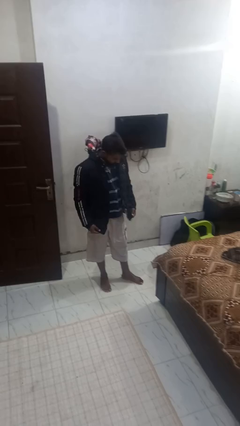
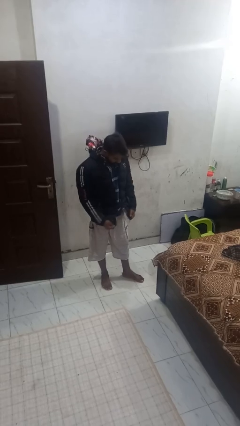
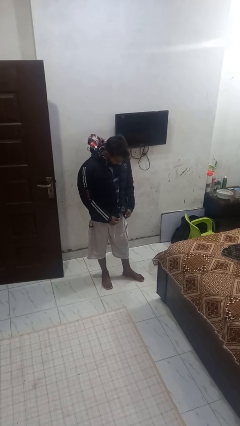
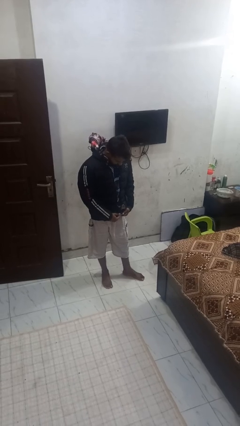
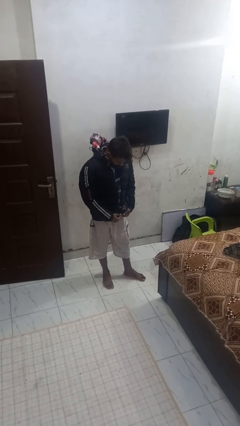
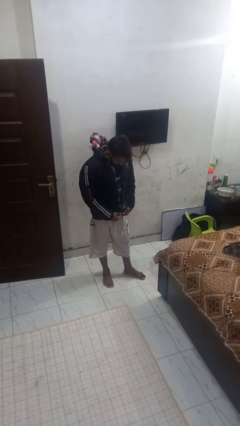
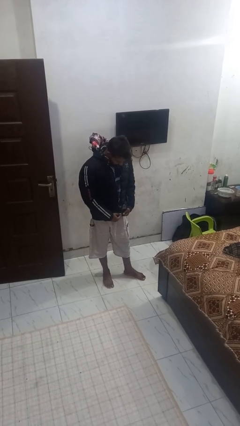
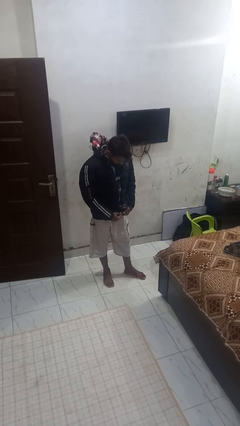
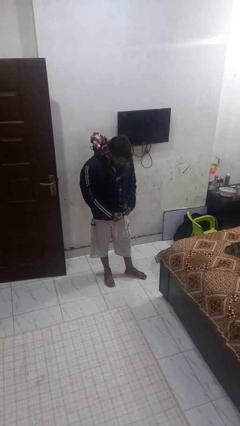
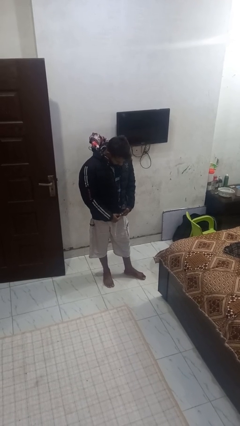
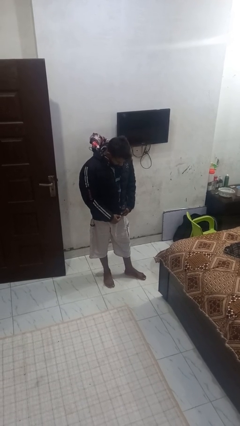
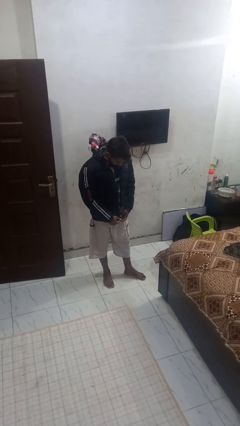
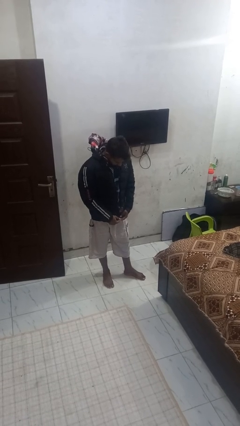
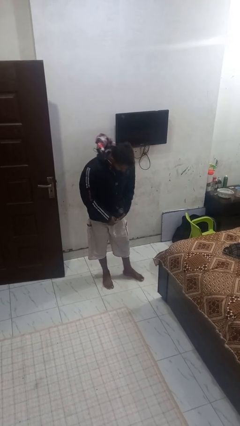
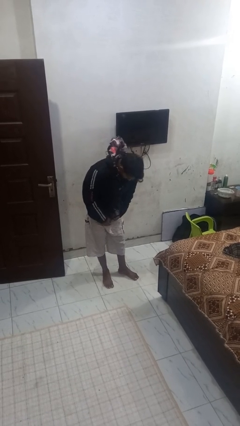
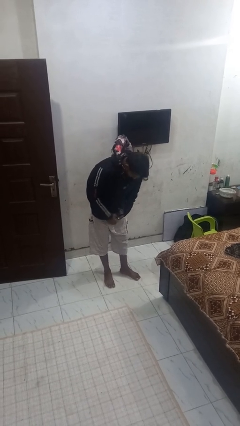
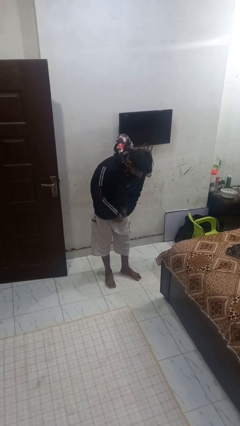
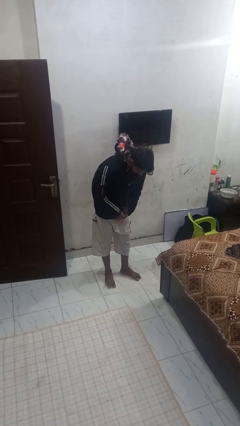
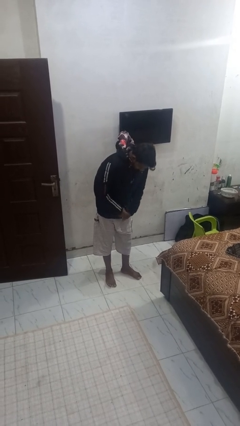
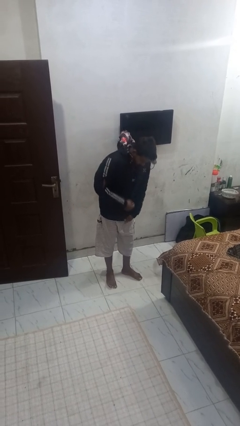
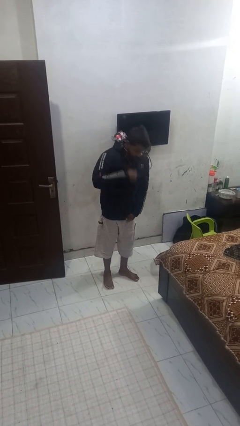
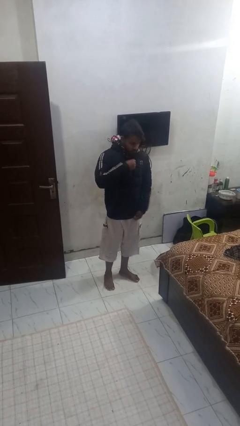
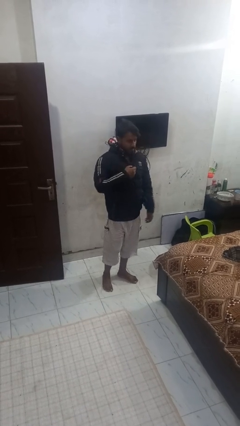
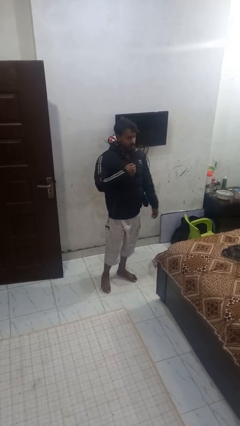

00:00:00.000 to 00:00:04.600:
person zips up jacket

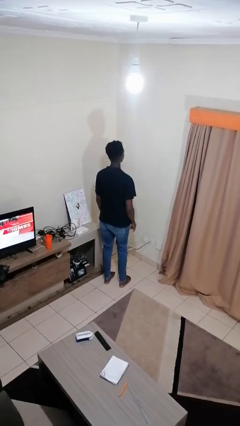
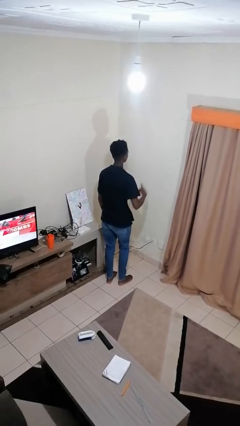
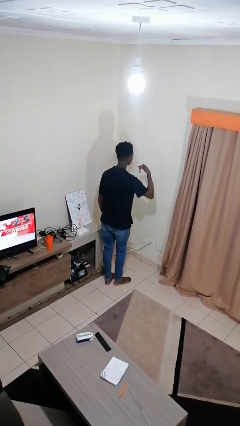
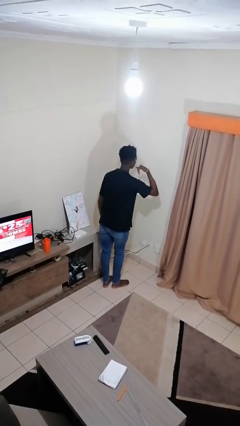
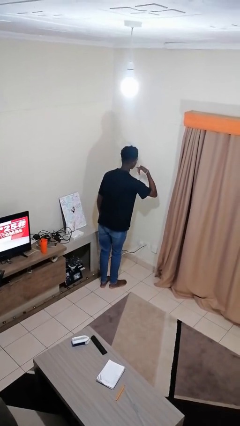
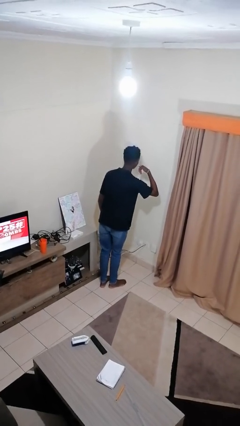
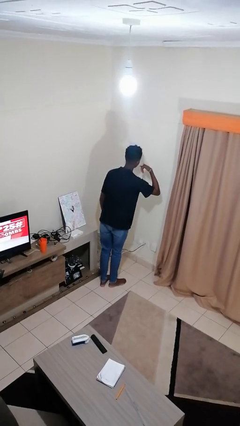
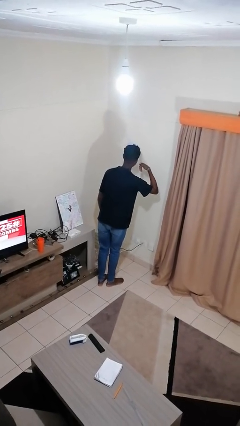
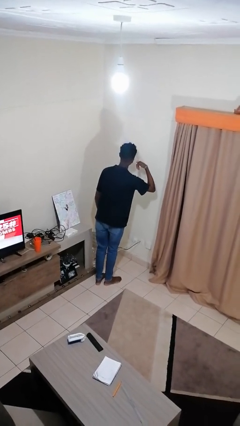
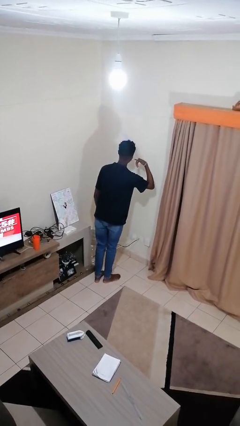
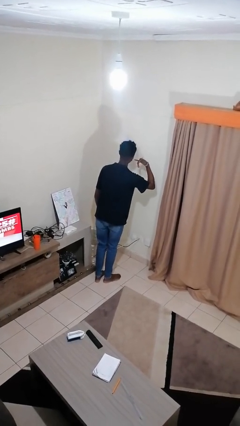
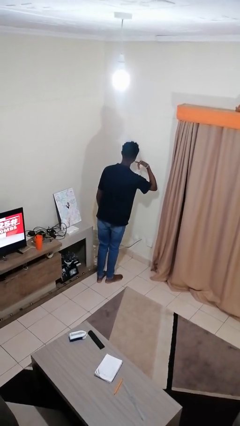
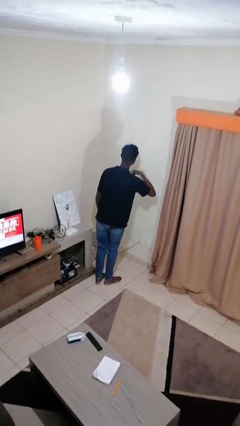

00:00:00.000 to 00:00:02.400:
person gestures call me

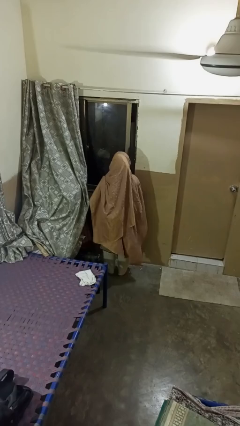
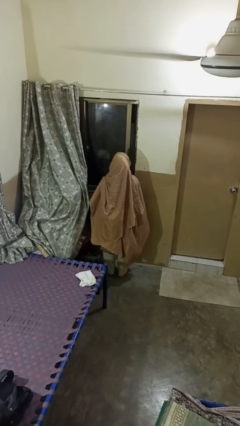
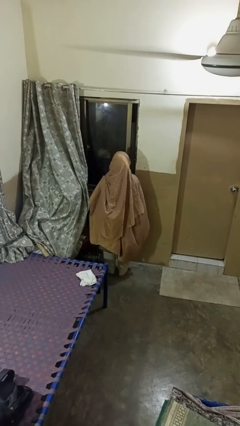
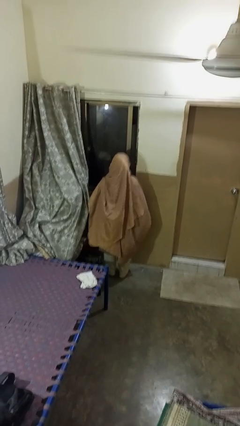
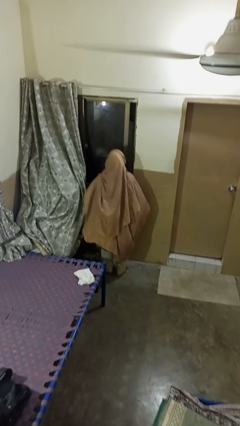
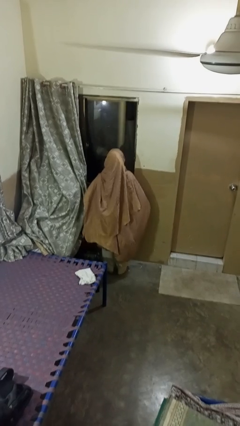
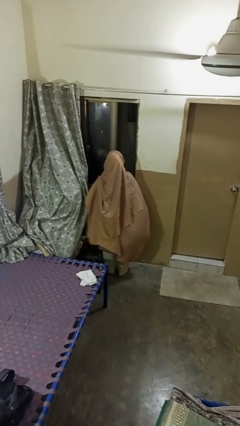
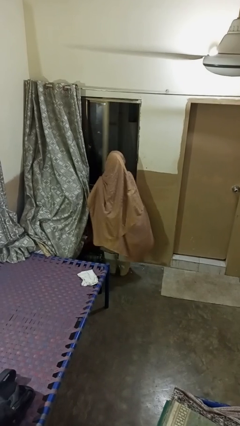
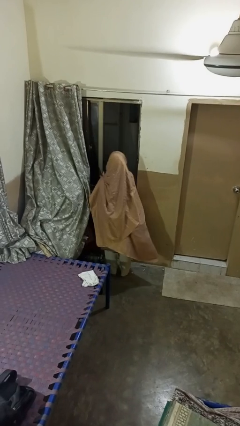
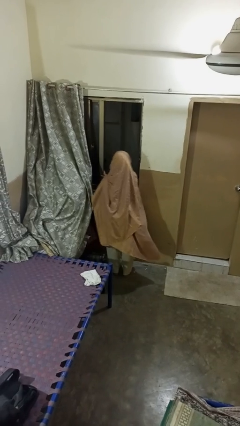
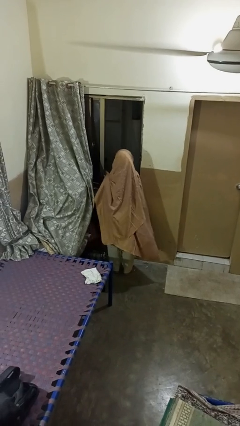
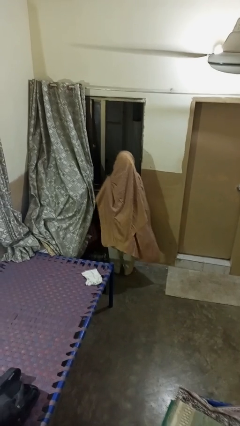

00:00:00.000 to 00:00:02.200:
person opens home window

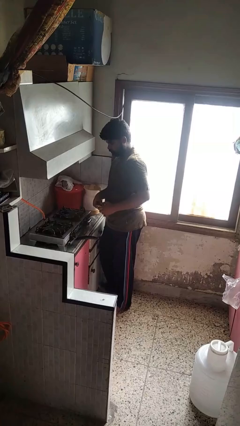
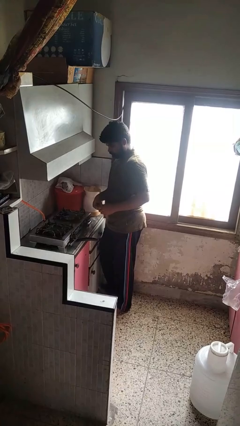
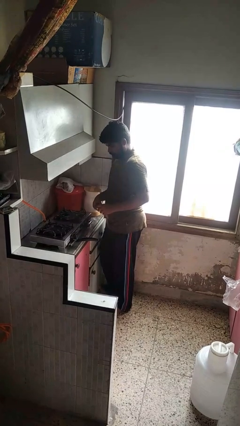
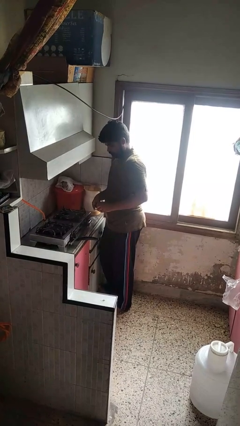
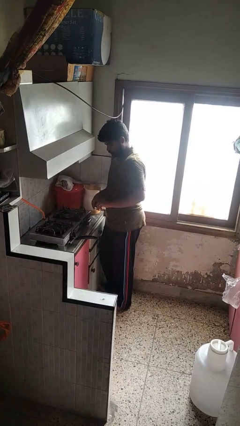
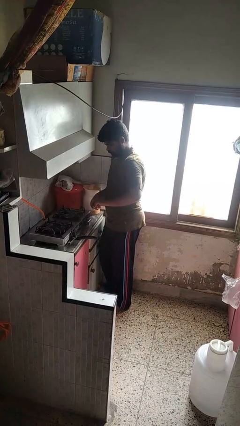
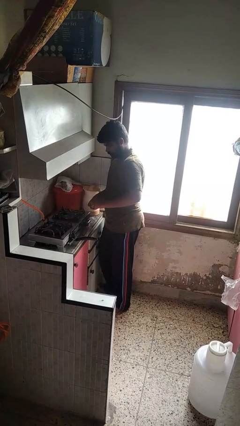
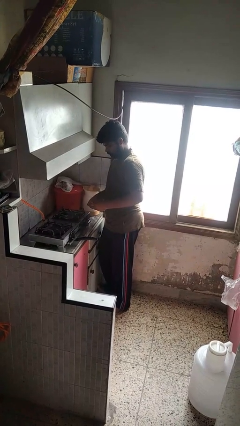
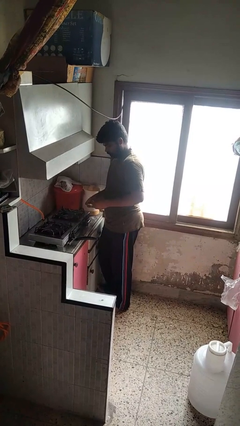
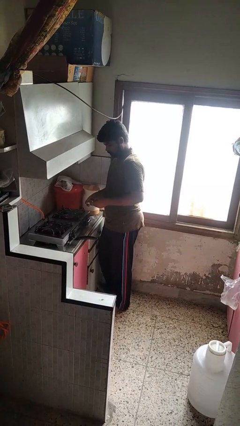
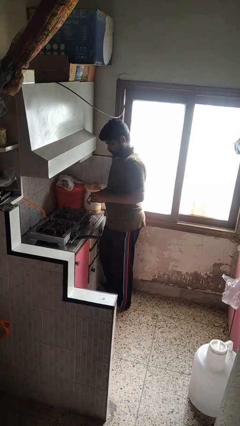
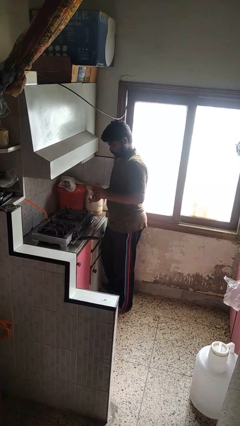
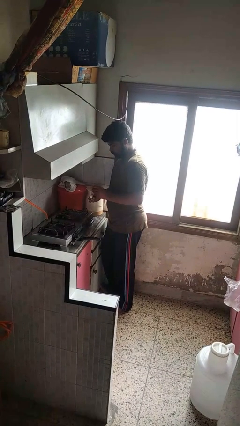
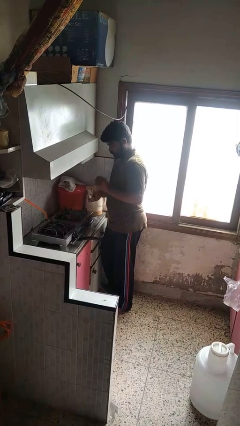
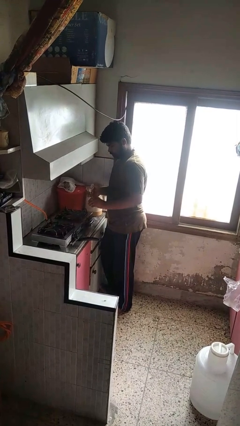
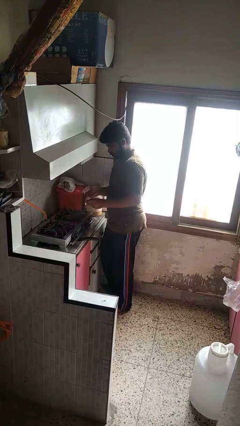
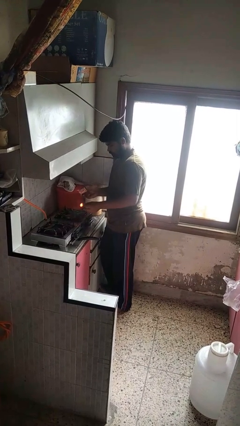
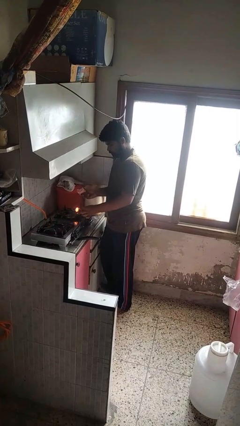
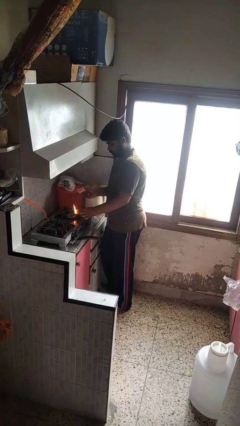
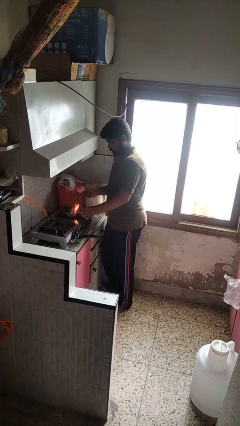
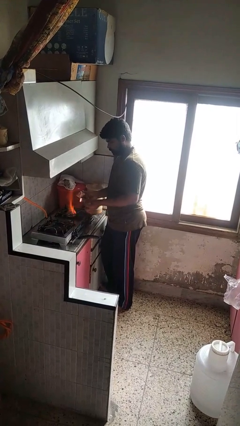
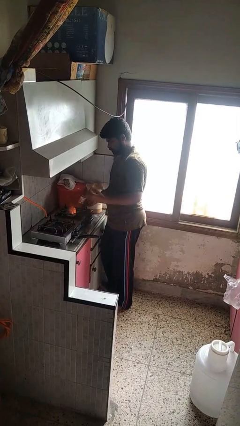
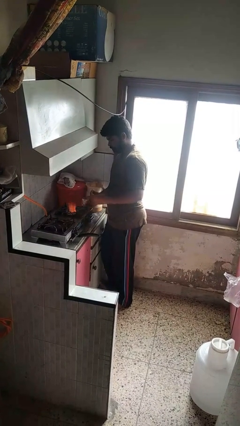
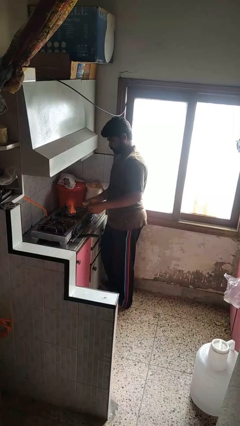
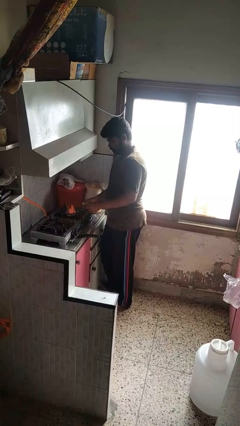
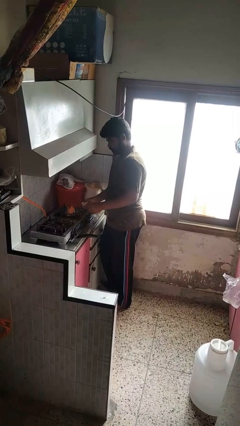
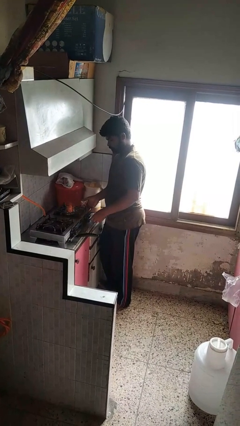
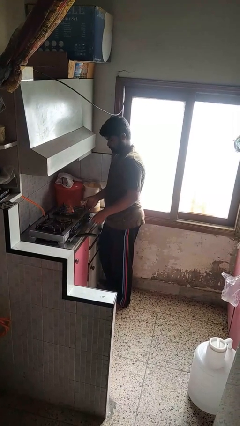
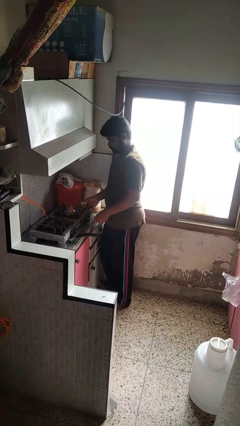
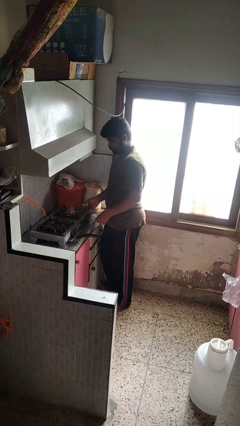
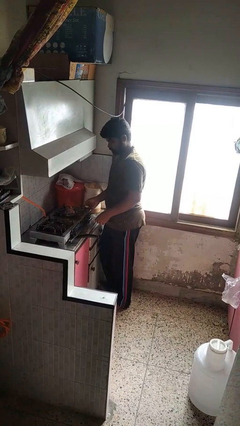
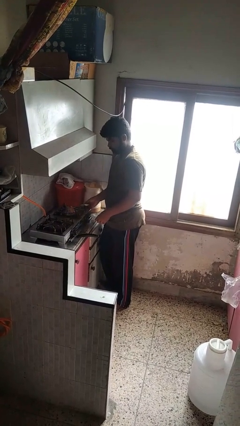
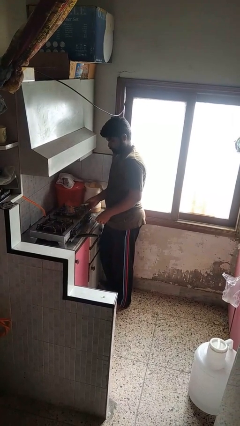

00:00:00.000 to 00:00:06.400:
person turns on stovetop

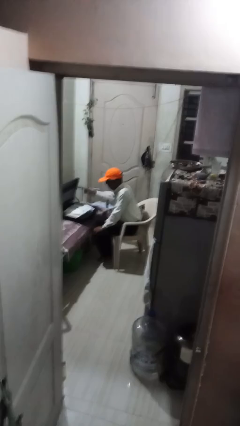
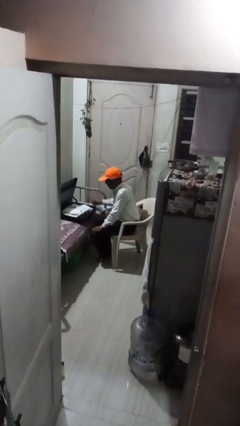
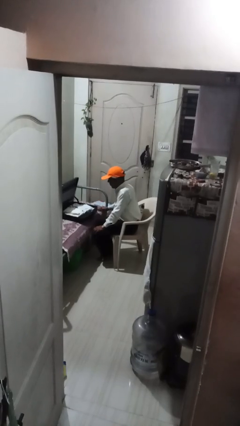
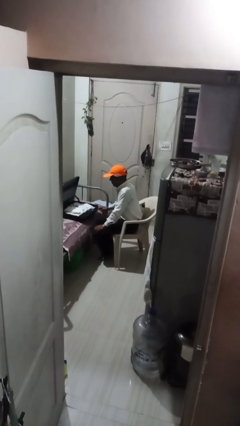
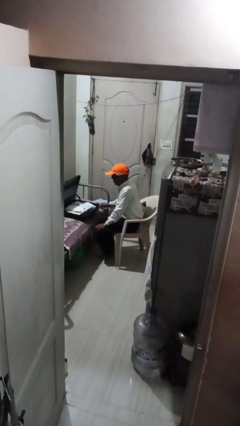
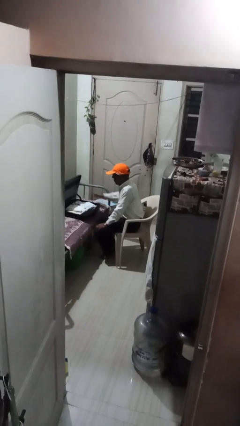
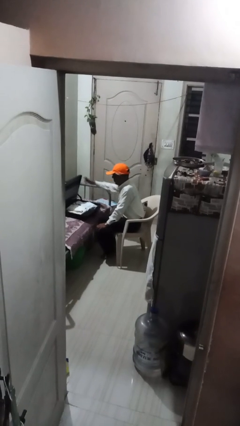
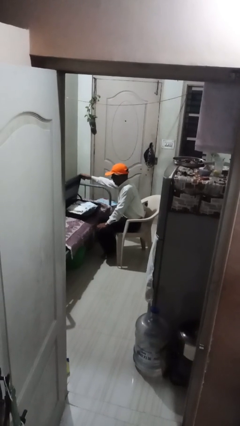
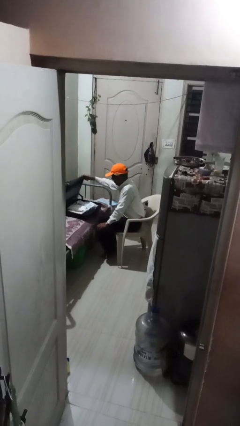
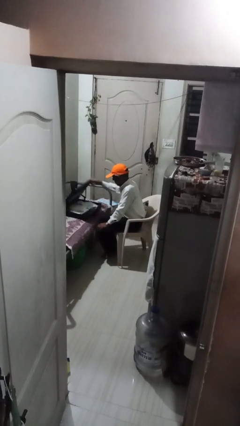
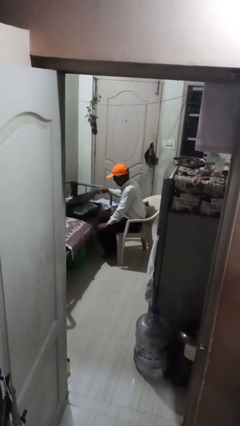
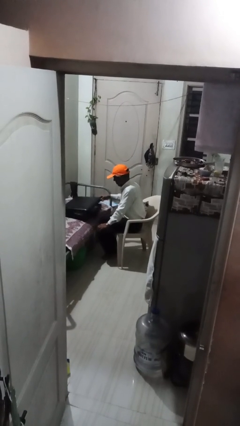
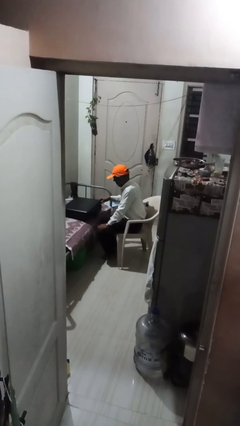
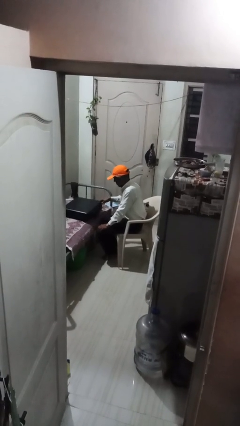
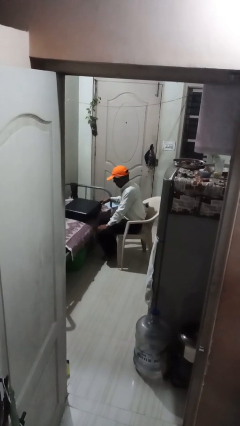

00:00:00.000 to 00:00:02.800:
person closes suitcase
